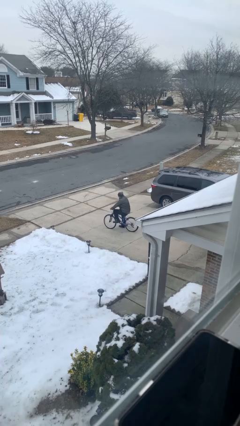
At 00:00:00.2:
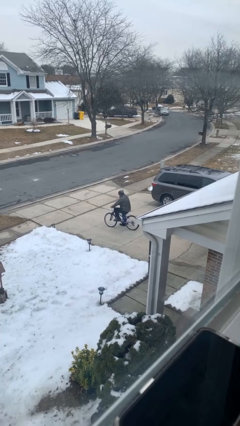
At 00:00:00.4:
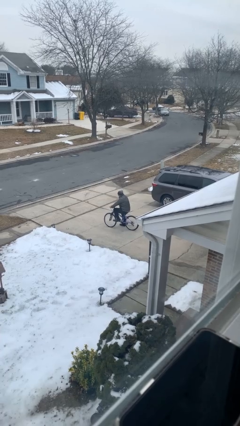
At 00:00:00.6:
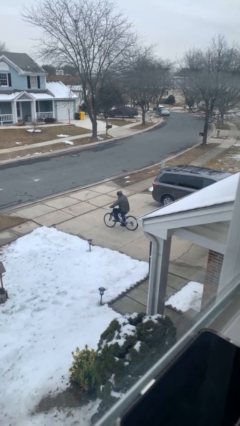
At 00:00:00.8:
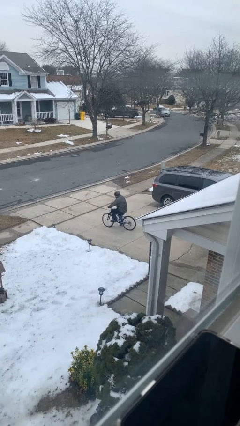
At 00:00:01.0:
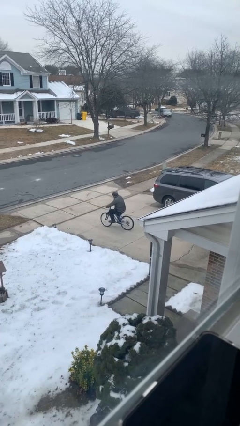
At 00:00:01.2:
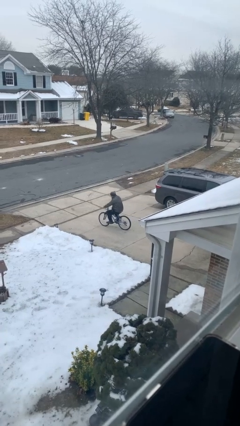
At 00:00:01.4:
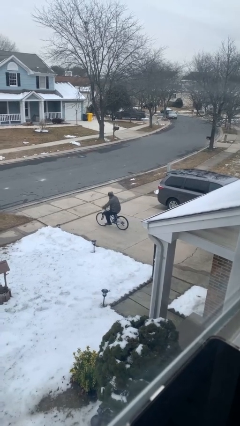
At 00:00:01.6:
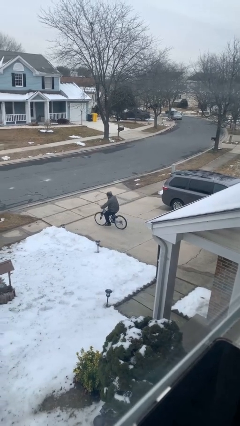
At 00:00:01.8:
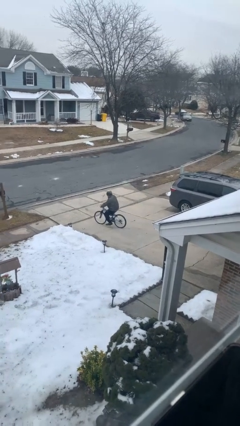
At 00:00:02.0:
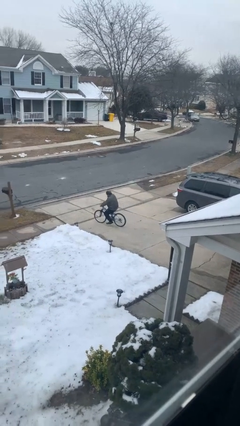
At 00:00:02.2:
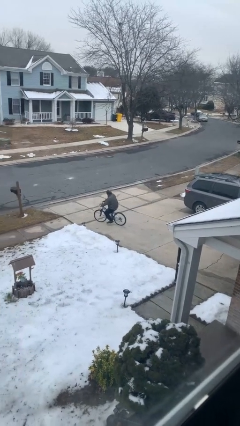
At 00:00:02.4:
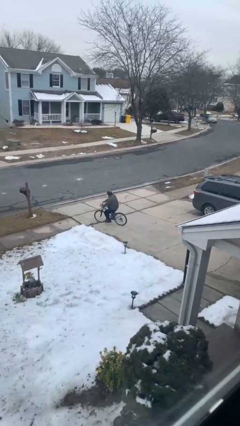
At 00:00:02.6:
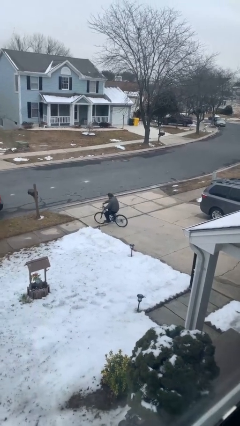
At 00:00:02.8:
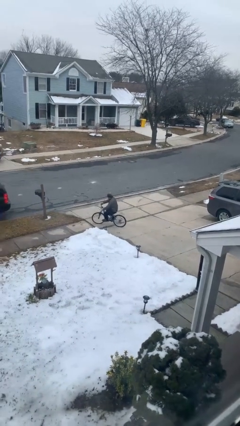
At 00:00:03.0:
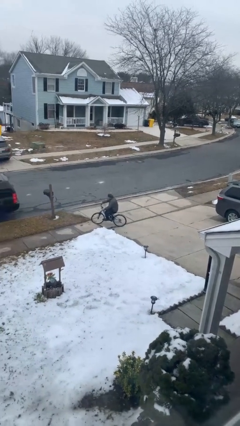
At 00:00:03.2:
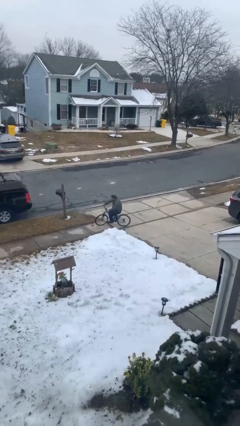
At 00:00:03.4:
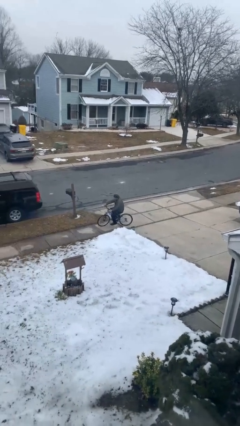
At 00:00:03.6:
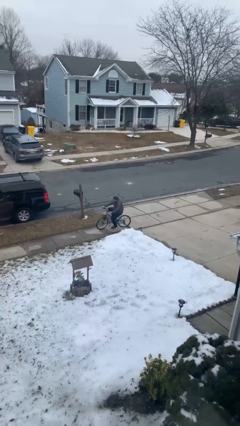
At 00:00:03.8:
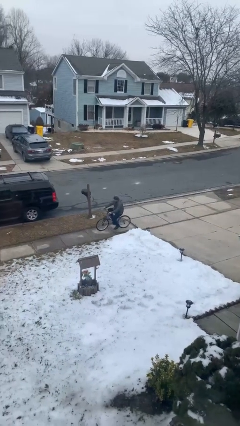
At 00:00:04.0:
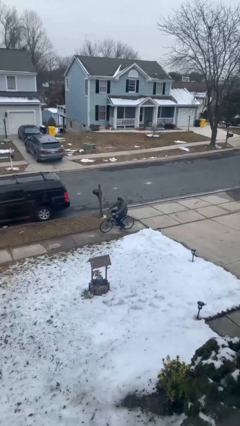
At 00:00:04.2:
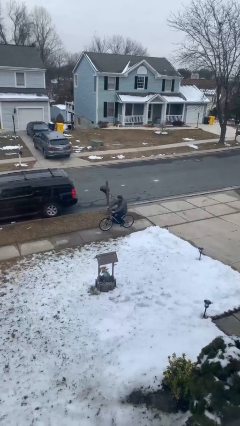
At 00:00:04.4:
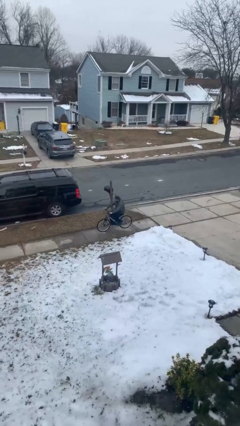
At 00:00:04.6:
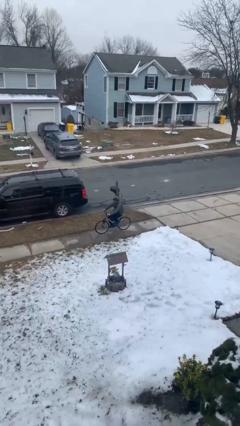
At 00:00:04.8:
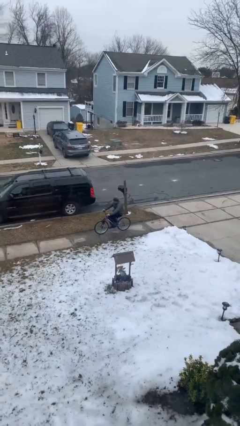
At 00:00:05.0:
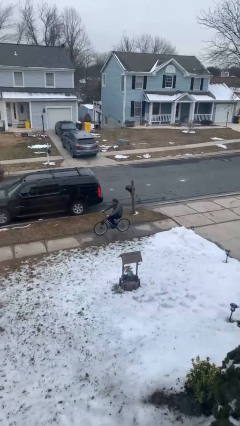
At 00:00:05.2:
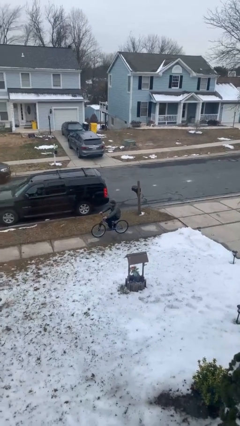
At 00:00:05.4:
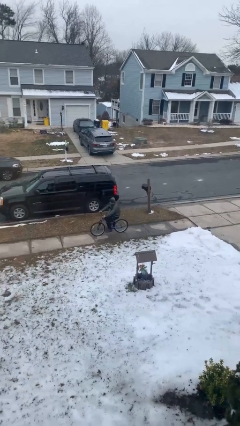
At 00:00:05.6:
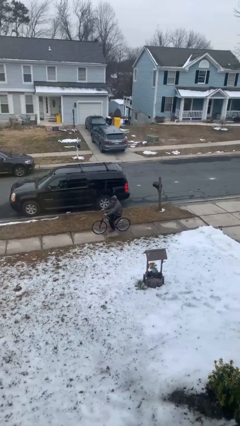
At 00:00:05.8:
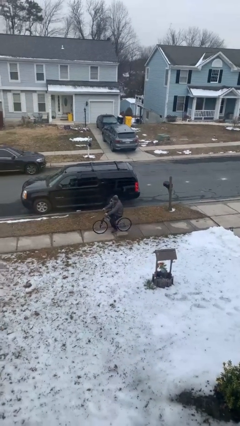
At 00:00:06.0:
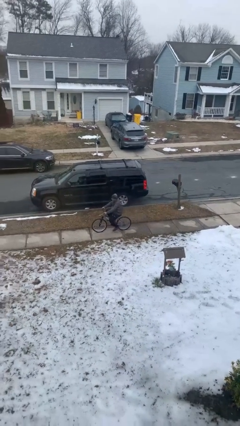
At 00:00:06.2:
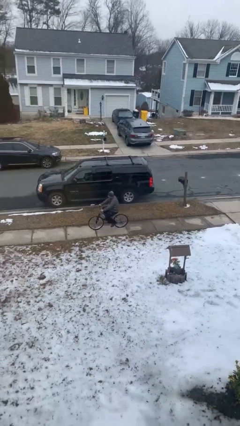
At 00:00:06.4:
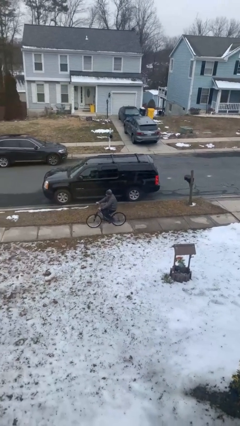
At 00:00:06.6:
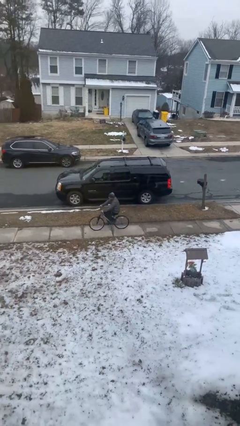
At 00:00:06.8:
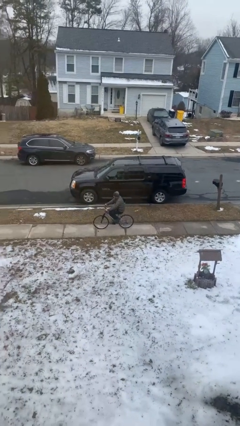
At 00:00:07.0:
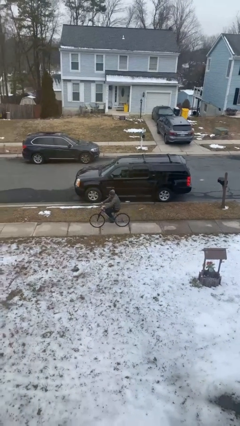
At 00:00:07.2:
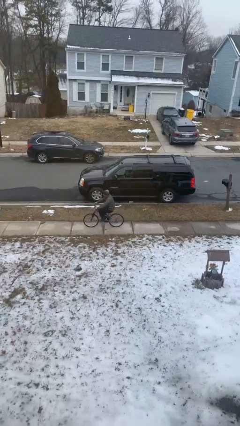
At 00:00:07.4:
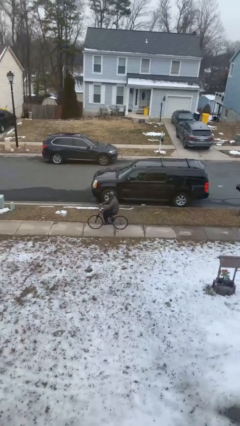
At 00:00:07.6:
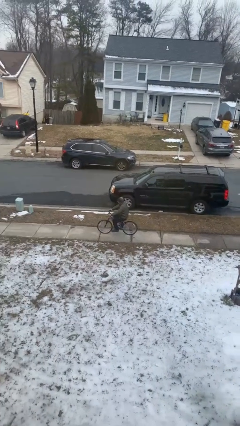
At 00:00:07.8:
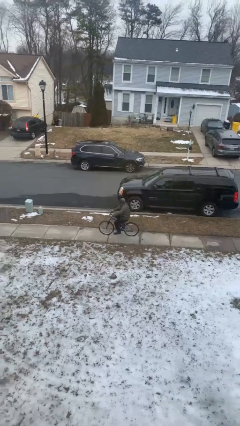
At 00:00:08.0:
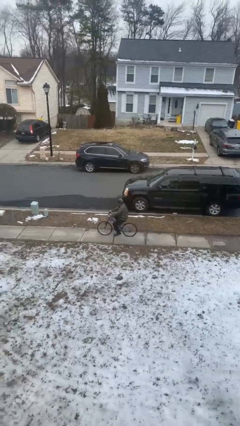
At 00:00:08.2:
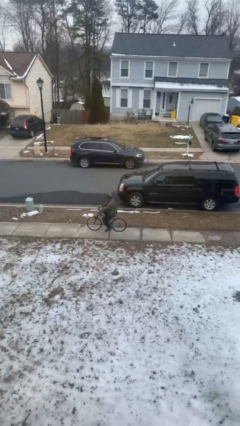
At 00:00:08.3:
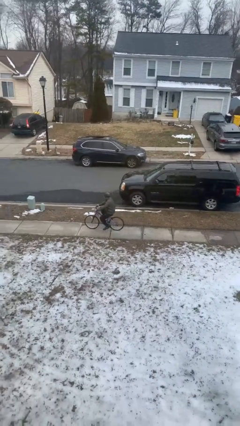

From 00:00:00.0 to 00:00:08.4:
person rides bicycle

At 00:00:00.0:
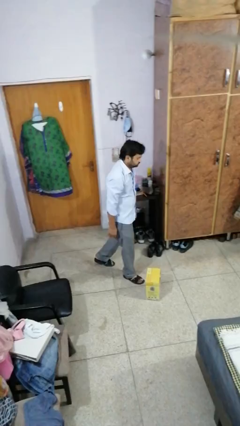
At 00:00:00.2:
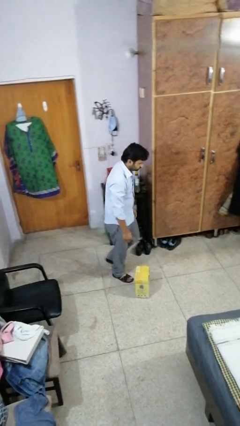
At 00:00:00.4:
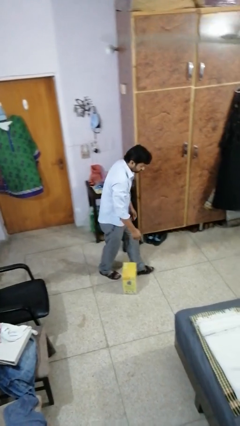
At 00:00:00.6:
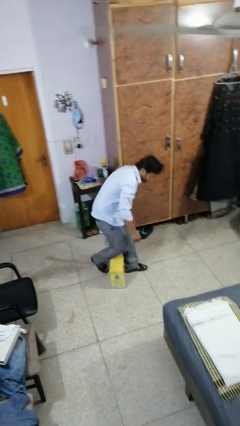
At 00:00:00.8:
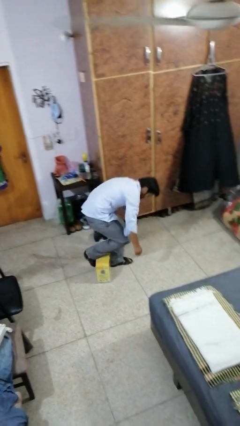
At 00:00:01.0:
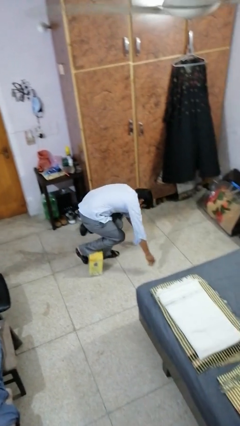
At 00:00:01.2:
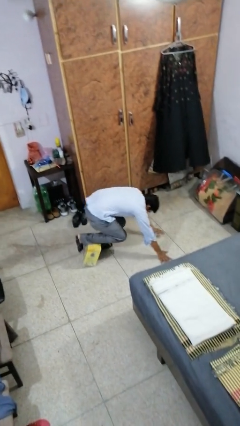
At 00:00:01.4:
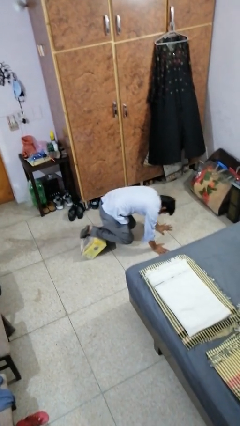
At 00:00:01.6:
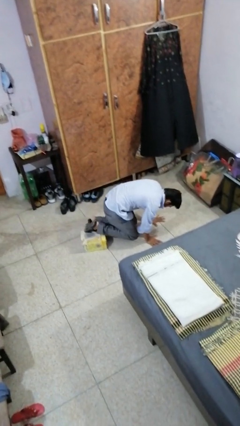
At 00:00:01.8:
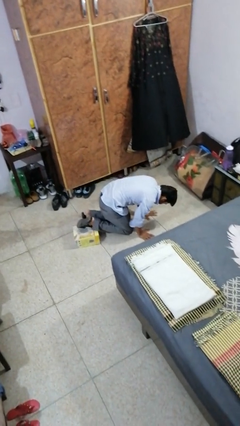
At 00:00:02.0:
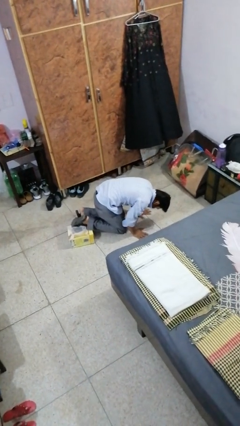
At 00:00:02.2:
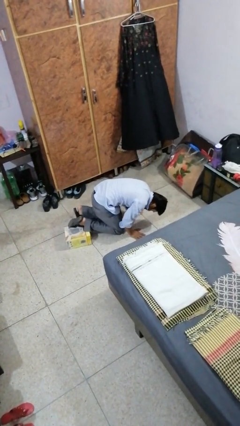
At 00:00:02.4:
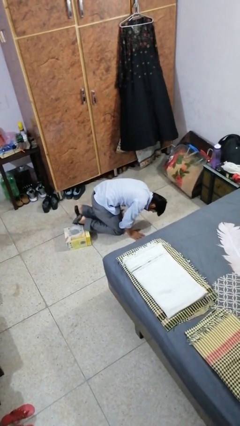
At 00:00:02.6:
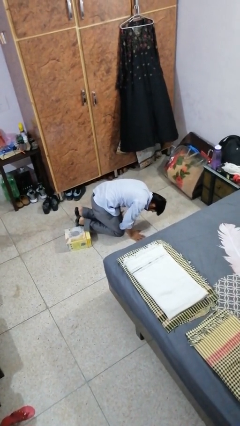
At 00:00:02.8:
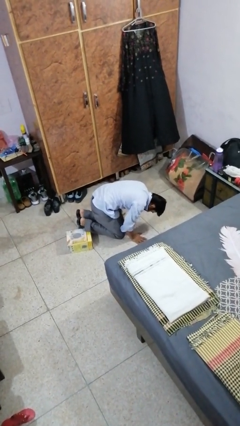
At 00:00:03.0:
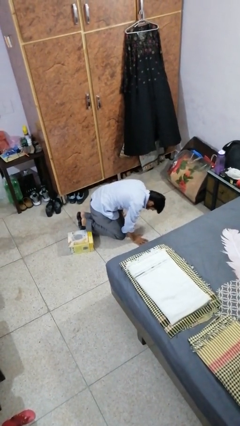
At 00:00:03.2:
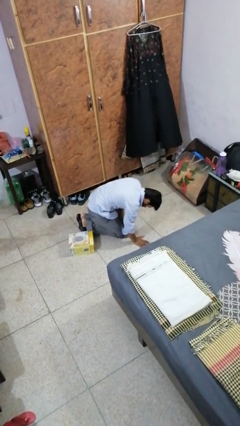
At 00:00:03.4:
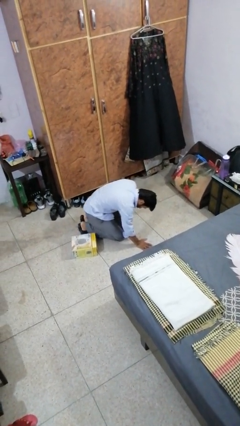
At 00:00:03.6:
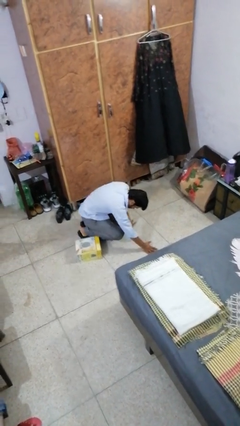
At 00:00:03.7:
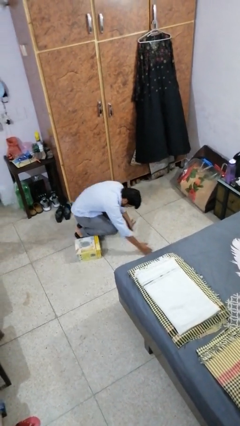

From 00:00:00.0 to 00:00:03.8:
person trips on object on floor

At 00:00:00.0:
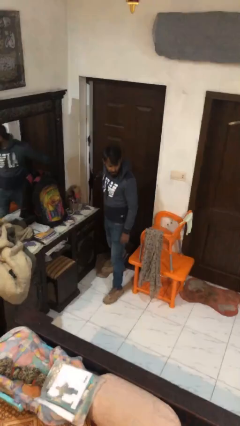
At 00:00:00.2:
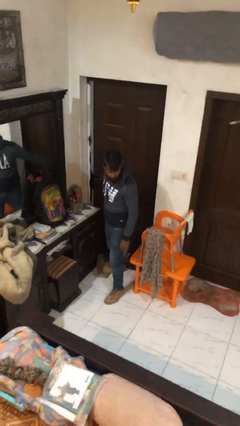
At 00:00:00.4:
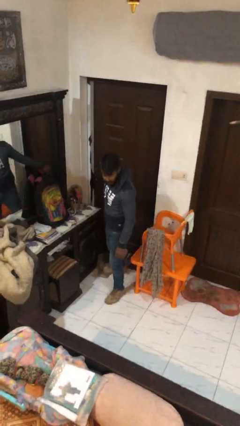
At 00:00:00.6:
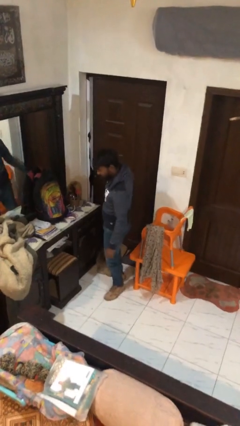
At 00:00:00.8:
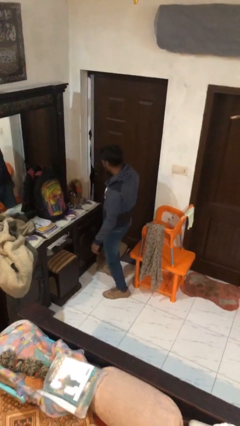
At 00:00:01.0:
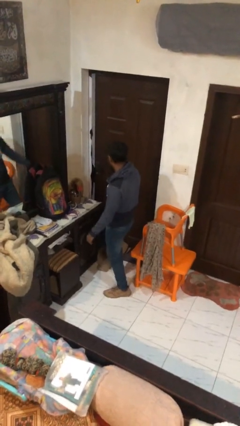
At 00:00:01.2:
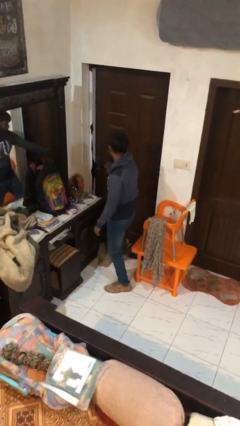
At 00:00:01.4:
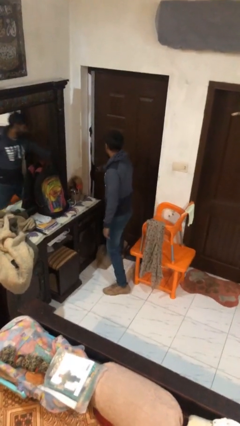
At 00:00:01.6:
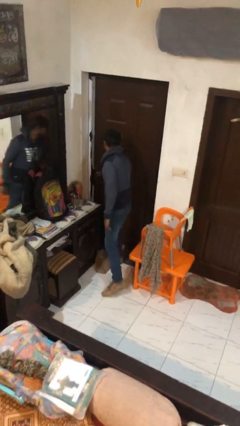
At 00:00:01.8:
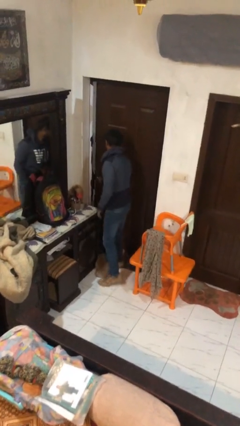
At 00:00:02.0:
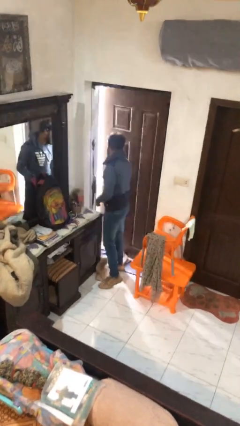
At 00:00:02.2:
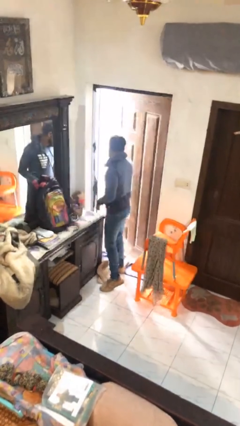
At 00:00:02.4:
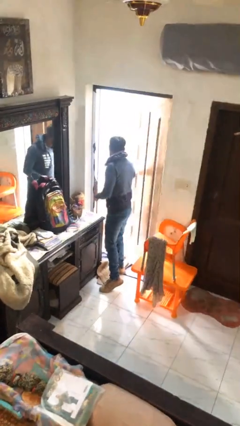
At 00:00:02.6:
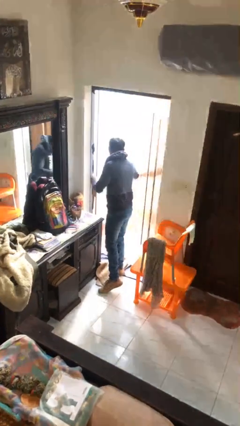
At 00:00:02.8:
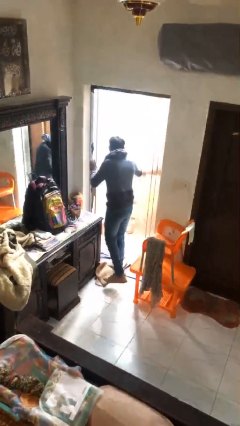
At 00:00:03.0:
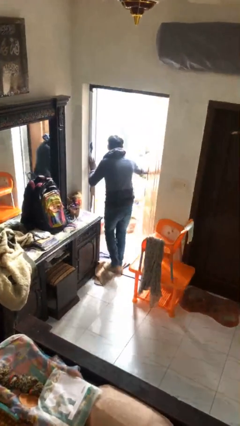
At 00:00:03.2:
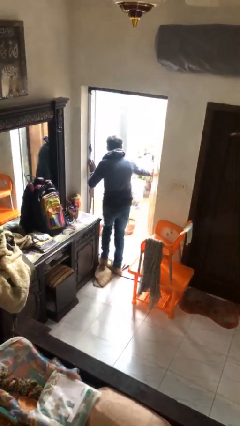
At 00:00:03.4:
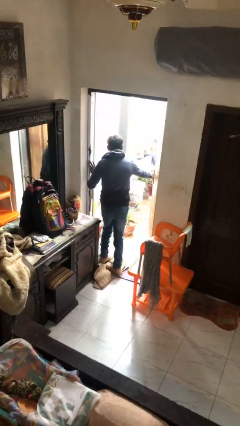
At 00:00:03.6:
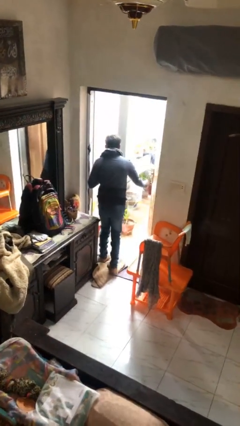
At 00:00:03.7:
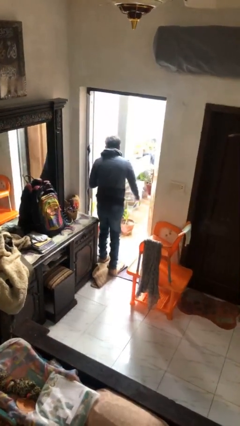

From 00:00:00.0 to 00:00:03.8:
person opens facility door

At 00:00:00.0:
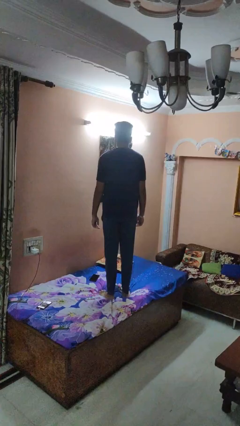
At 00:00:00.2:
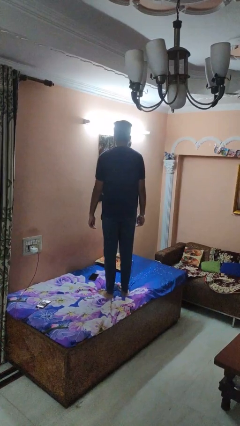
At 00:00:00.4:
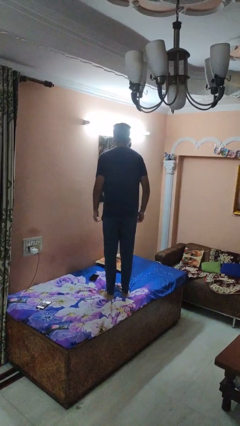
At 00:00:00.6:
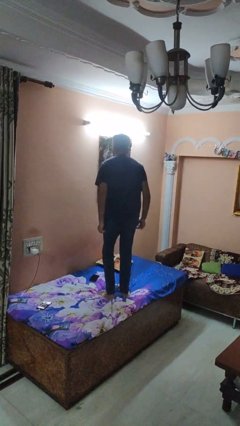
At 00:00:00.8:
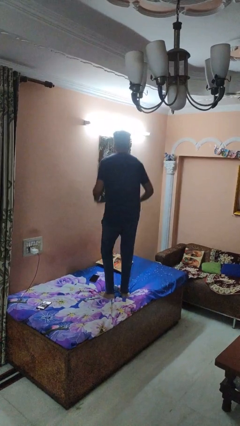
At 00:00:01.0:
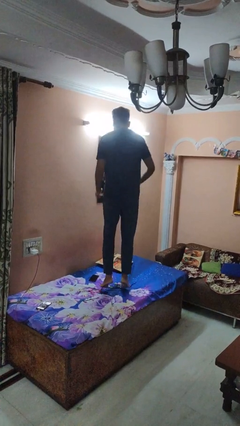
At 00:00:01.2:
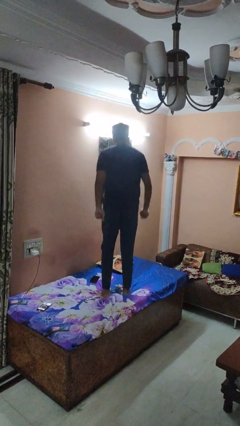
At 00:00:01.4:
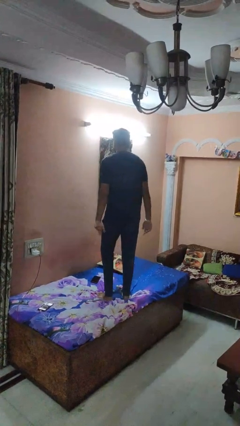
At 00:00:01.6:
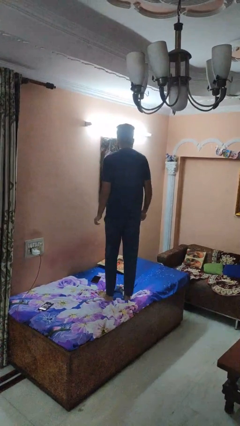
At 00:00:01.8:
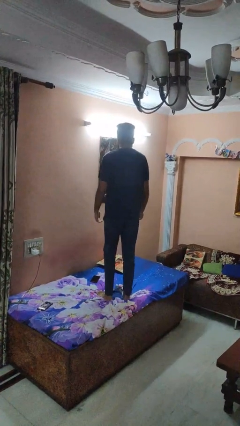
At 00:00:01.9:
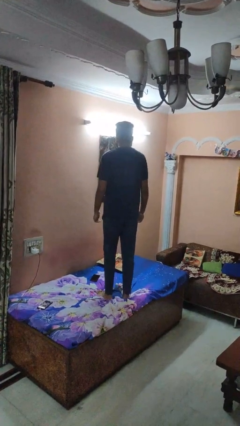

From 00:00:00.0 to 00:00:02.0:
person jumps on bed
